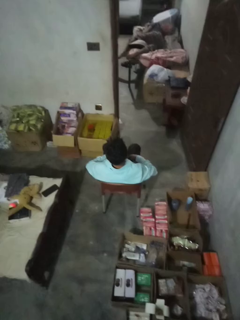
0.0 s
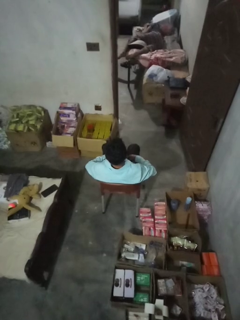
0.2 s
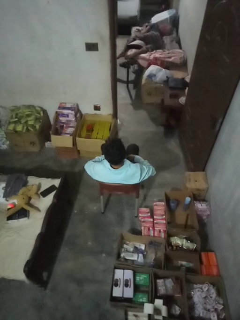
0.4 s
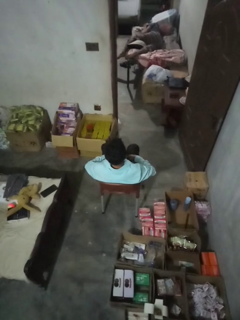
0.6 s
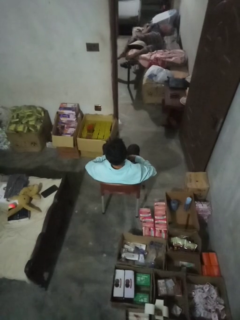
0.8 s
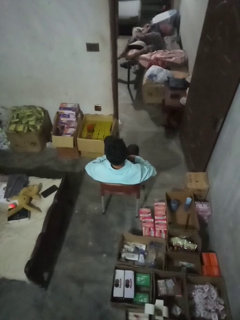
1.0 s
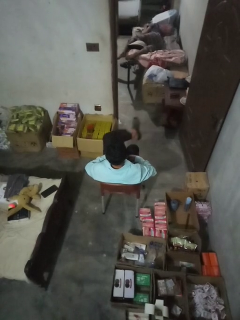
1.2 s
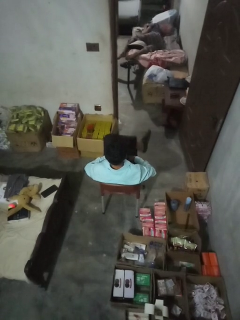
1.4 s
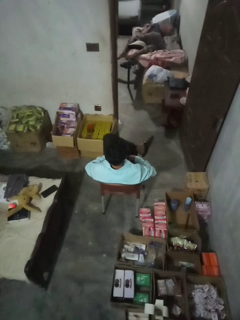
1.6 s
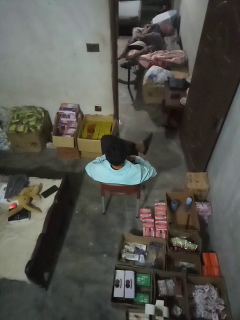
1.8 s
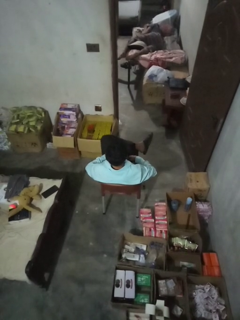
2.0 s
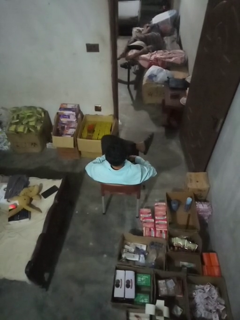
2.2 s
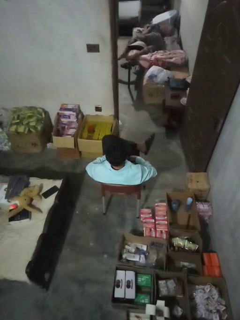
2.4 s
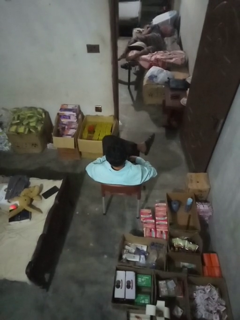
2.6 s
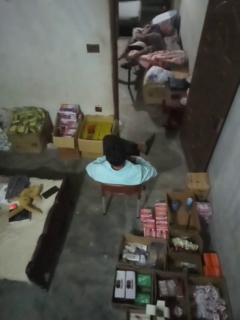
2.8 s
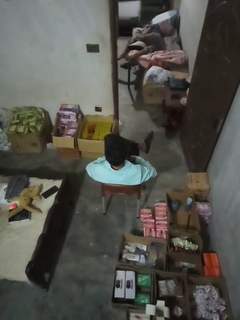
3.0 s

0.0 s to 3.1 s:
person crosses legs

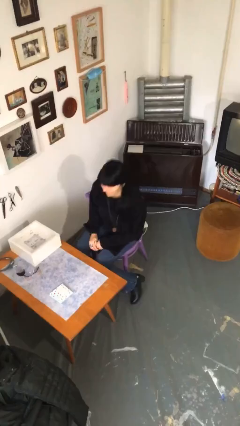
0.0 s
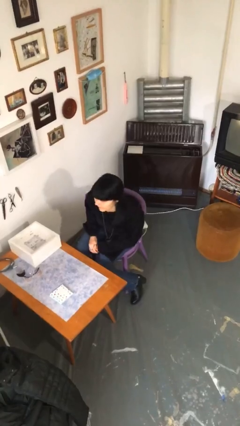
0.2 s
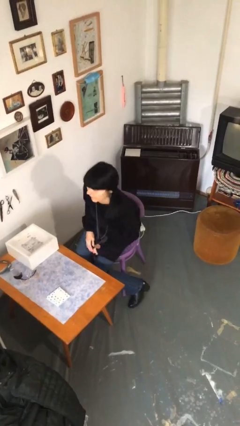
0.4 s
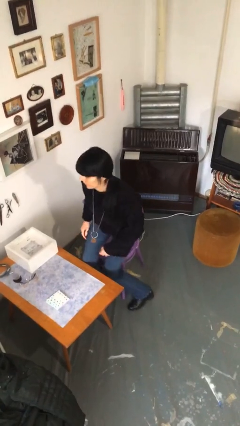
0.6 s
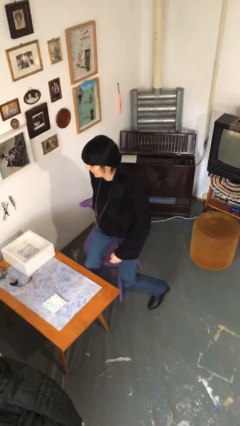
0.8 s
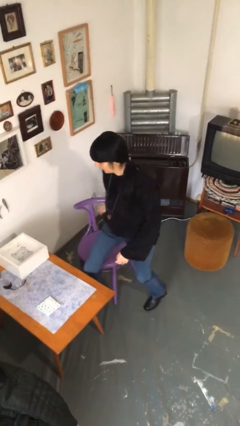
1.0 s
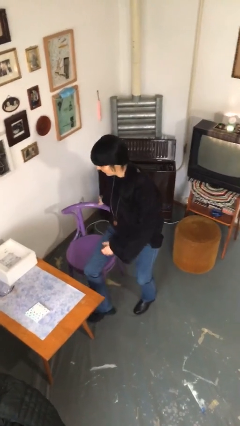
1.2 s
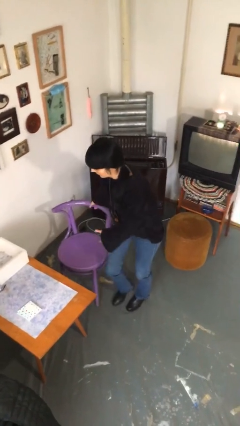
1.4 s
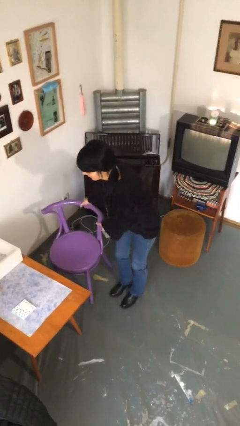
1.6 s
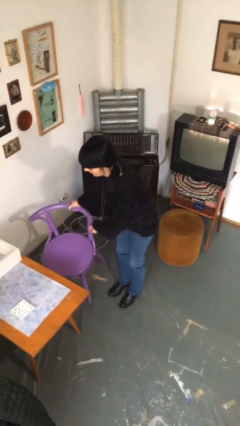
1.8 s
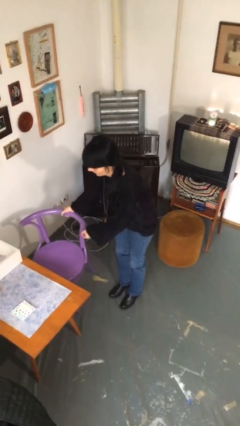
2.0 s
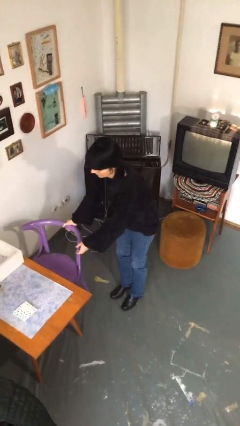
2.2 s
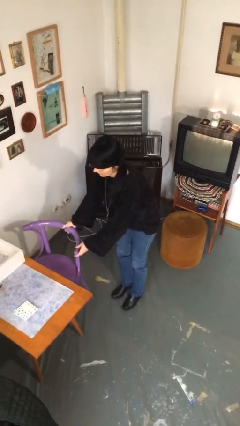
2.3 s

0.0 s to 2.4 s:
person stands up

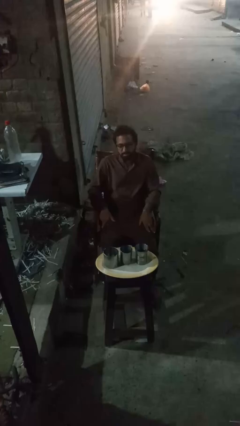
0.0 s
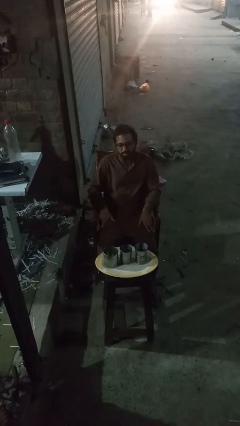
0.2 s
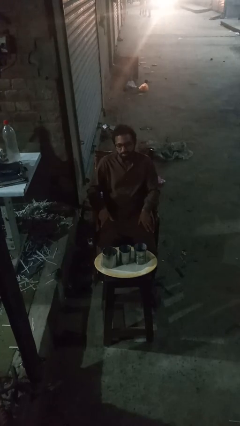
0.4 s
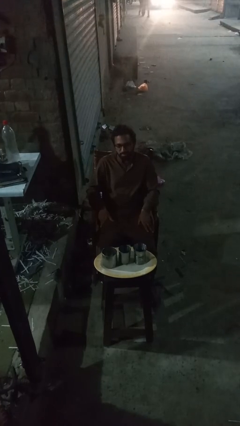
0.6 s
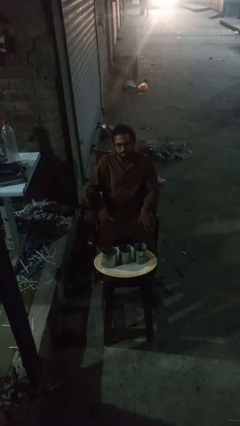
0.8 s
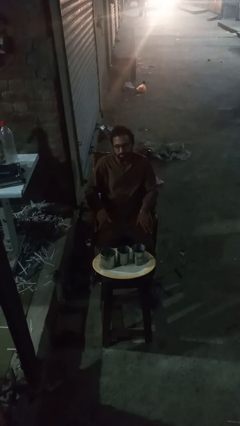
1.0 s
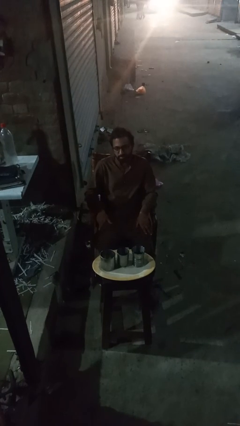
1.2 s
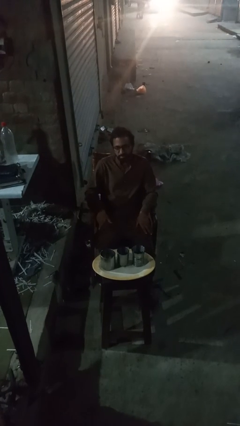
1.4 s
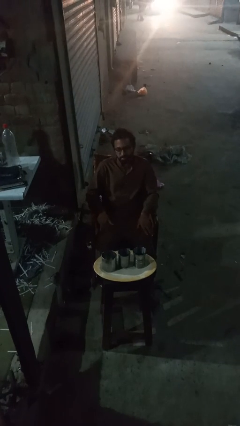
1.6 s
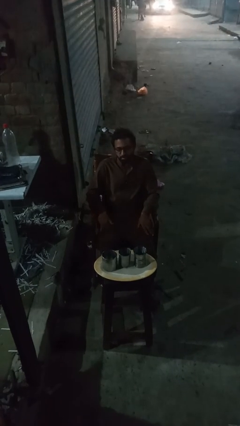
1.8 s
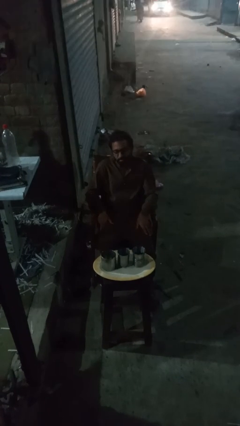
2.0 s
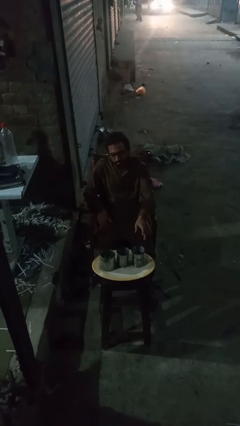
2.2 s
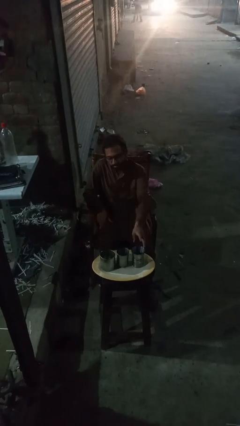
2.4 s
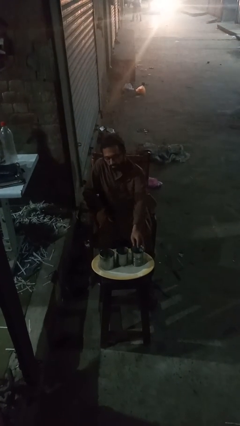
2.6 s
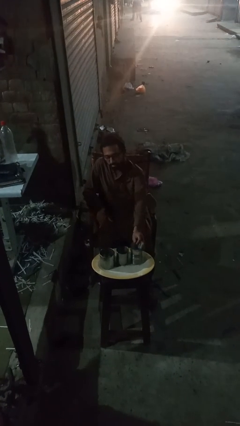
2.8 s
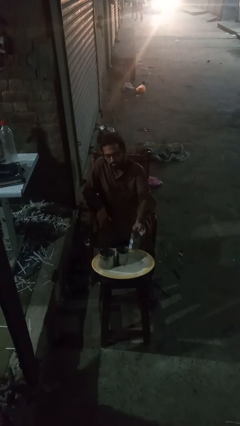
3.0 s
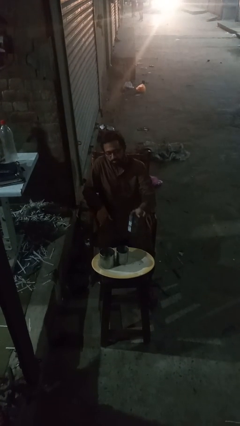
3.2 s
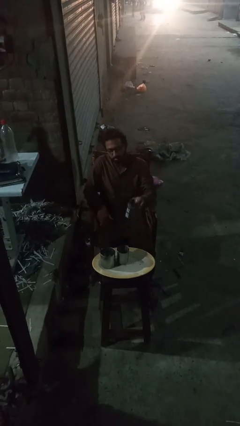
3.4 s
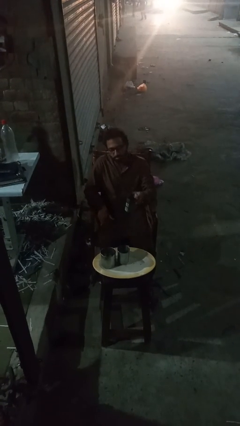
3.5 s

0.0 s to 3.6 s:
person picks up object from table

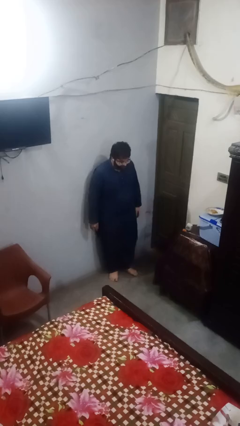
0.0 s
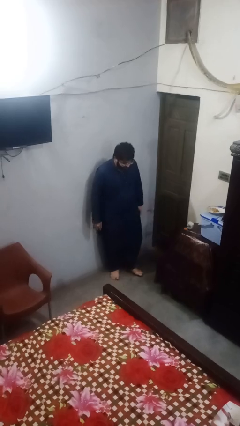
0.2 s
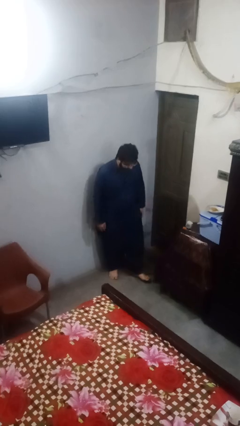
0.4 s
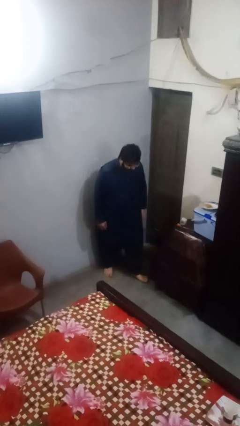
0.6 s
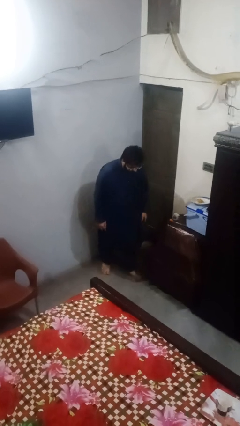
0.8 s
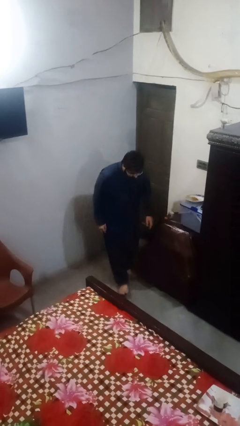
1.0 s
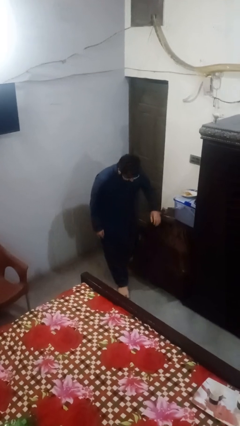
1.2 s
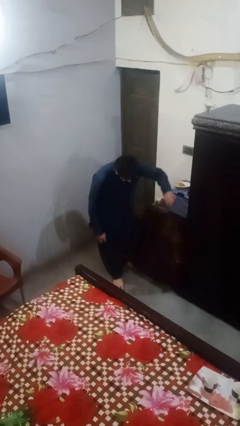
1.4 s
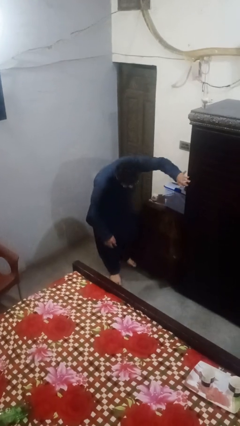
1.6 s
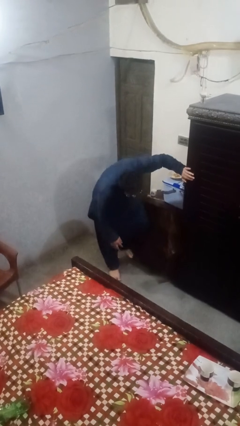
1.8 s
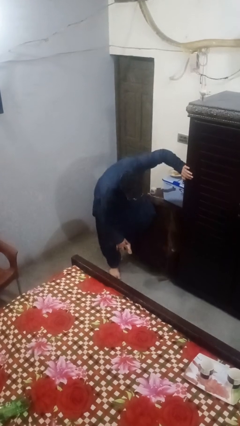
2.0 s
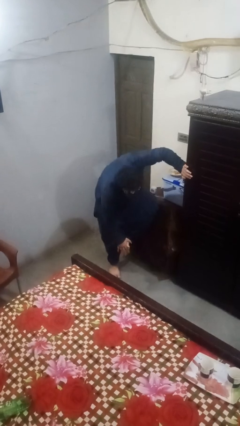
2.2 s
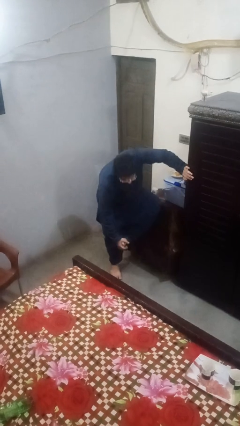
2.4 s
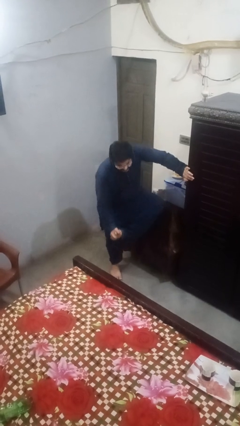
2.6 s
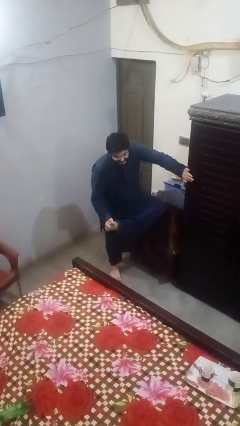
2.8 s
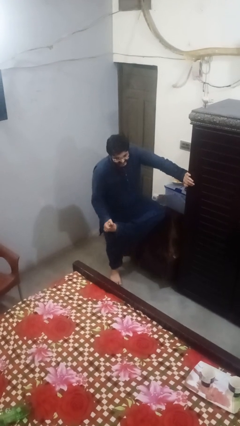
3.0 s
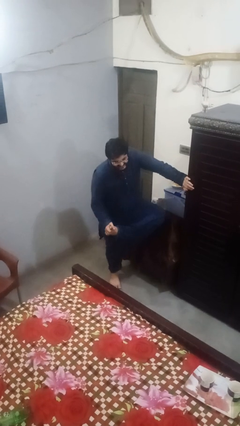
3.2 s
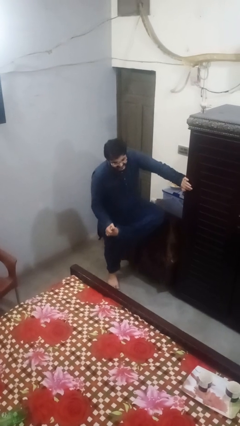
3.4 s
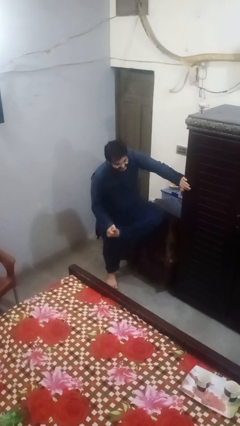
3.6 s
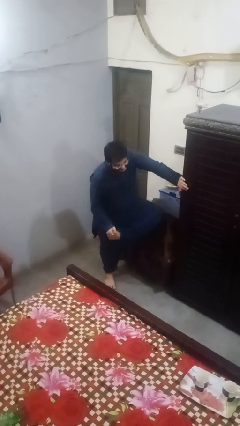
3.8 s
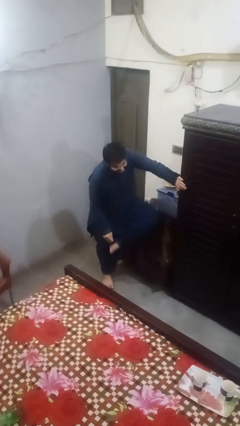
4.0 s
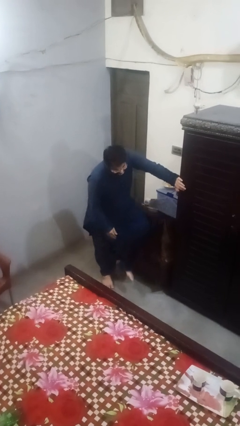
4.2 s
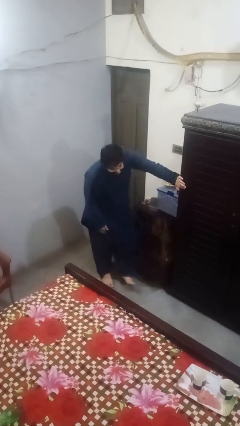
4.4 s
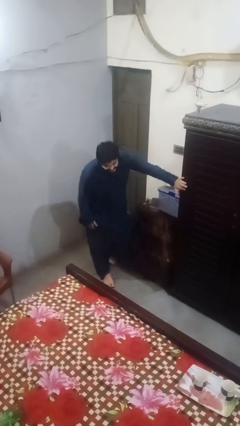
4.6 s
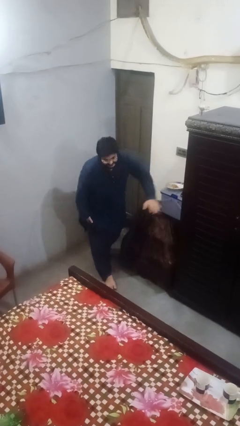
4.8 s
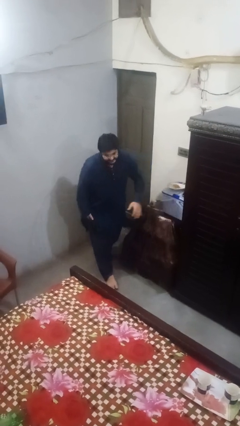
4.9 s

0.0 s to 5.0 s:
person stubs toe

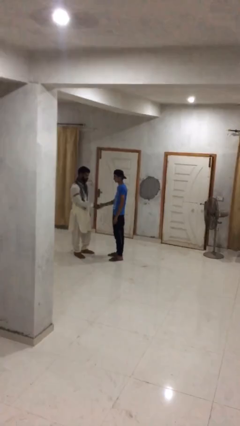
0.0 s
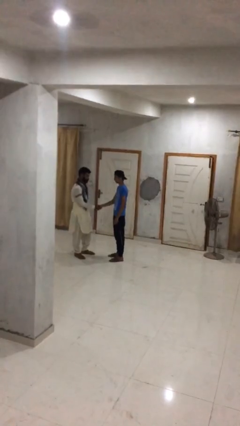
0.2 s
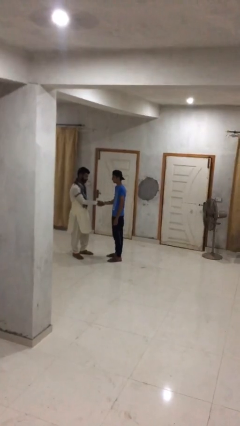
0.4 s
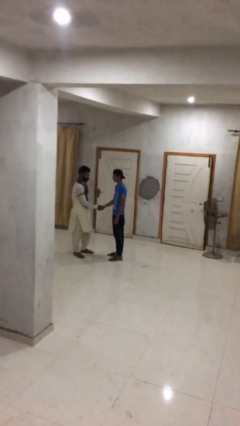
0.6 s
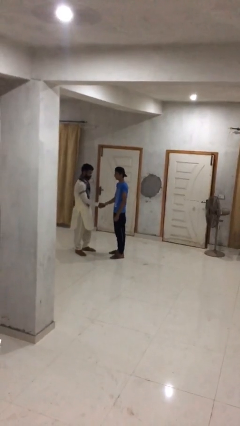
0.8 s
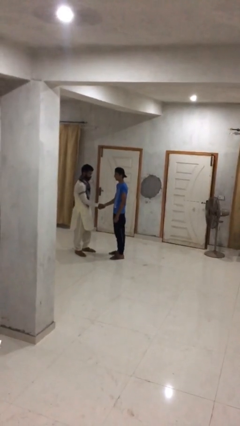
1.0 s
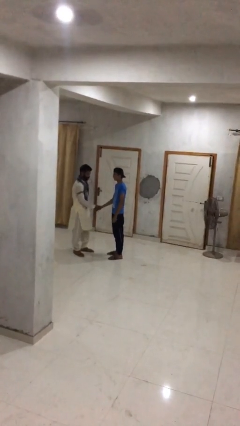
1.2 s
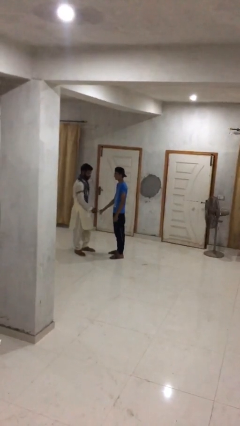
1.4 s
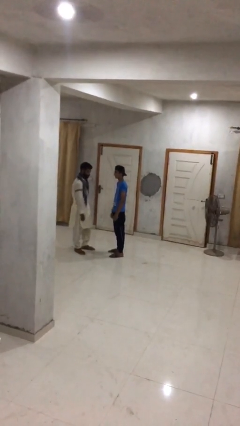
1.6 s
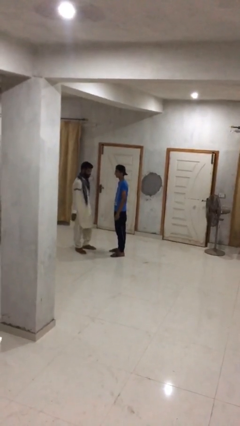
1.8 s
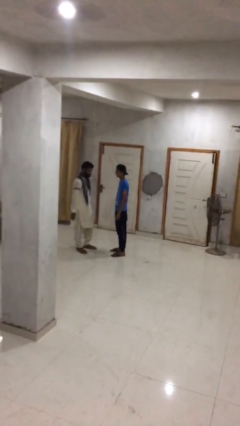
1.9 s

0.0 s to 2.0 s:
person shakes hand

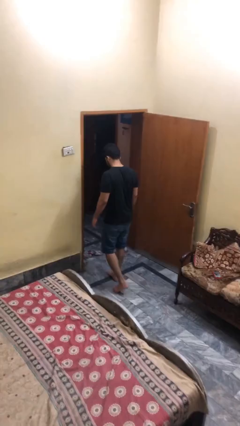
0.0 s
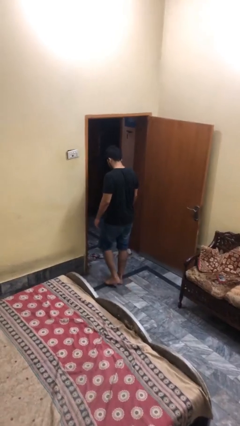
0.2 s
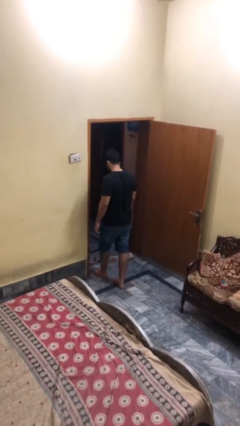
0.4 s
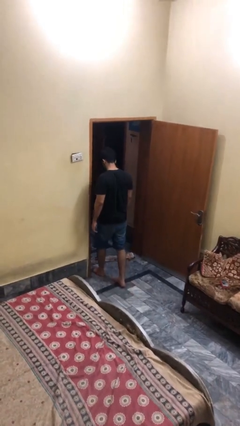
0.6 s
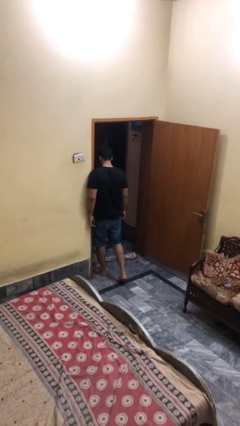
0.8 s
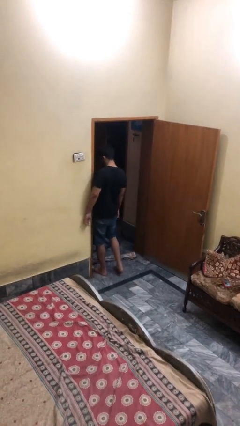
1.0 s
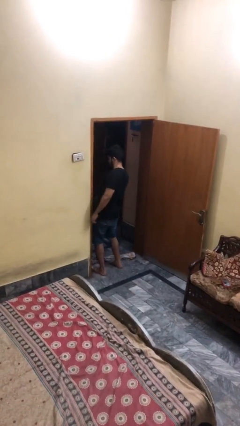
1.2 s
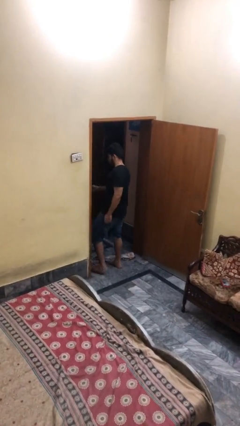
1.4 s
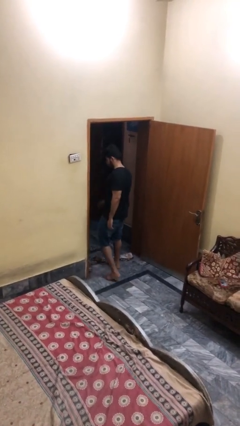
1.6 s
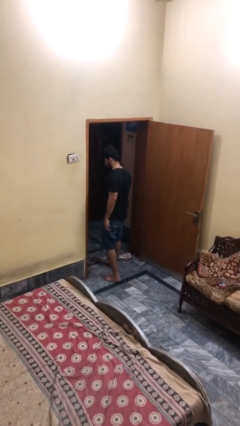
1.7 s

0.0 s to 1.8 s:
person bumps into wall
